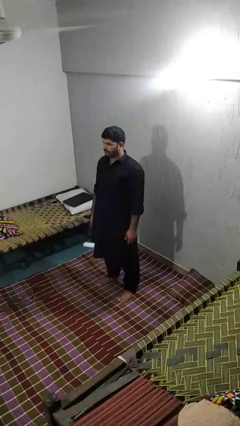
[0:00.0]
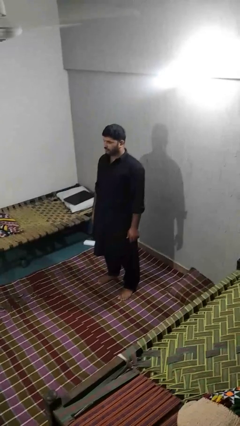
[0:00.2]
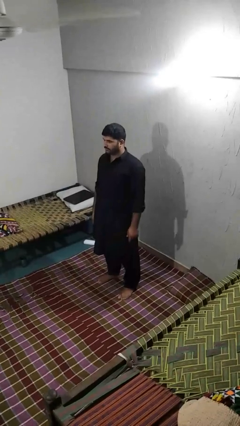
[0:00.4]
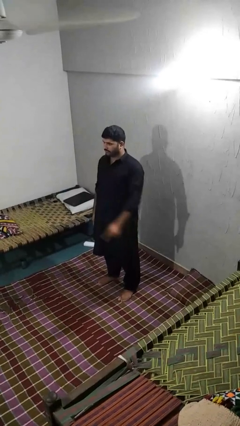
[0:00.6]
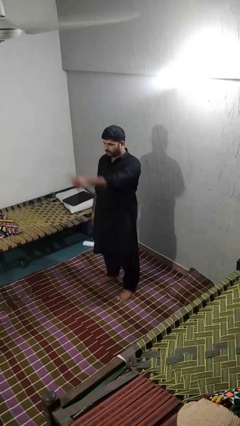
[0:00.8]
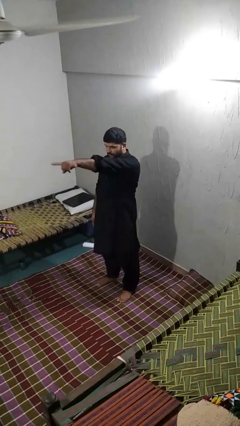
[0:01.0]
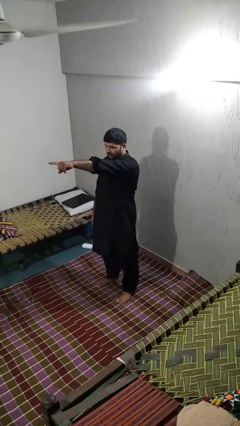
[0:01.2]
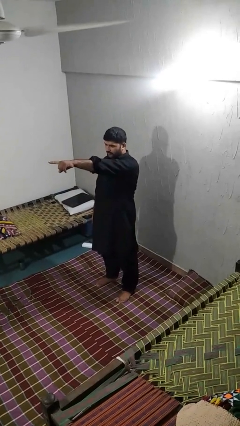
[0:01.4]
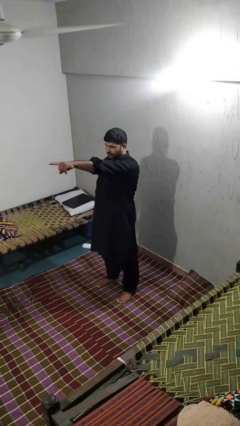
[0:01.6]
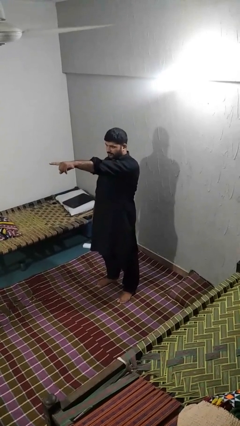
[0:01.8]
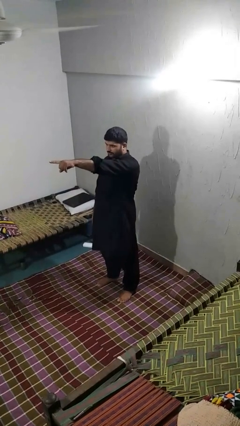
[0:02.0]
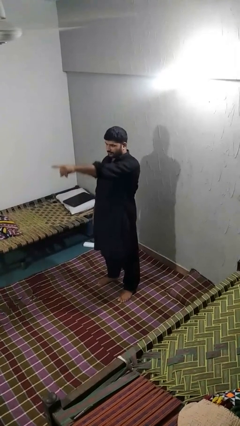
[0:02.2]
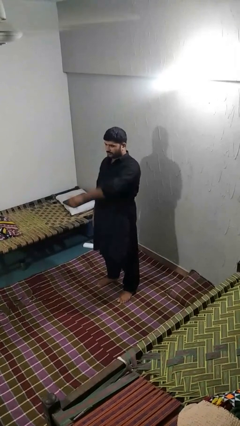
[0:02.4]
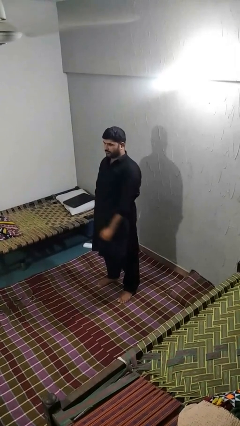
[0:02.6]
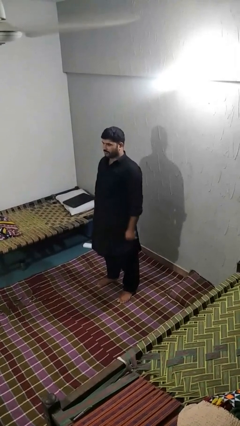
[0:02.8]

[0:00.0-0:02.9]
person points at person

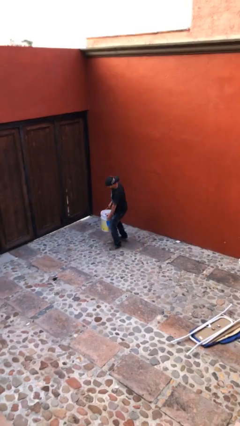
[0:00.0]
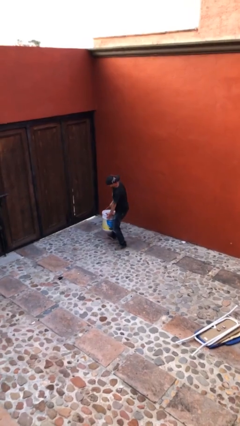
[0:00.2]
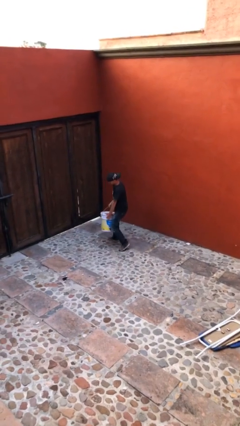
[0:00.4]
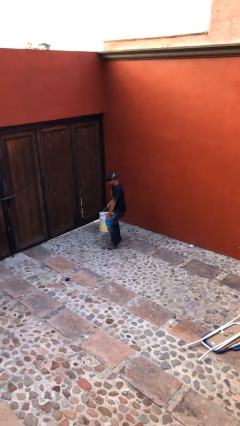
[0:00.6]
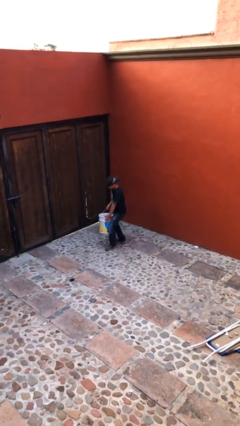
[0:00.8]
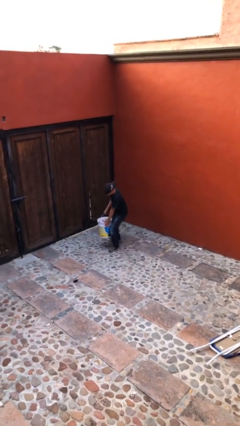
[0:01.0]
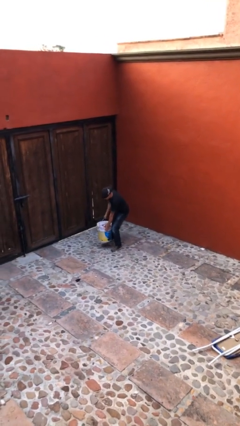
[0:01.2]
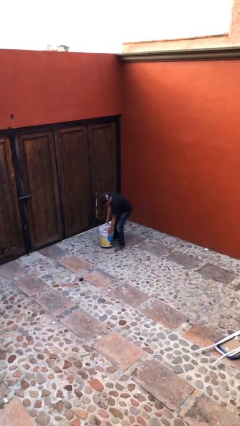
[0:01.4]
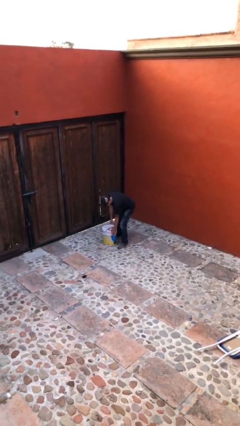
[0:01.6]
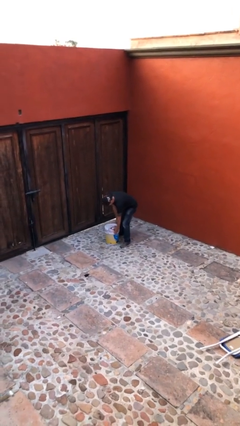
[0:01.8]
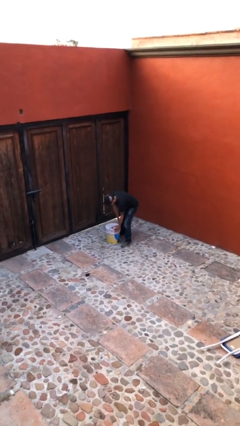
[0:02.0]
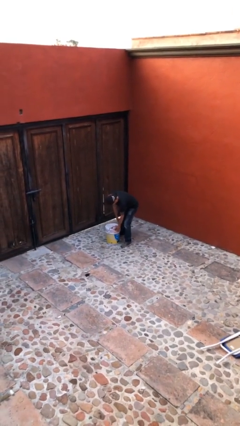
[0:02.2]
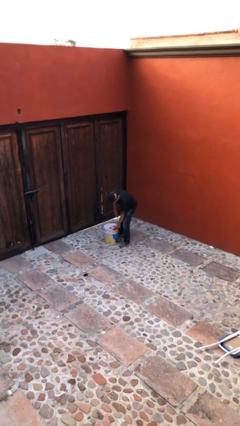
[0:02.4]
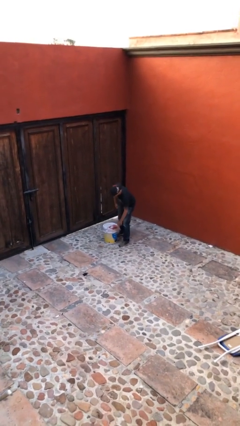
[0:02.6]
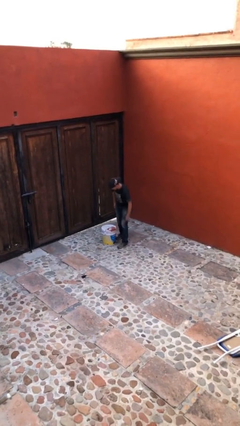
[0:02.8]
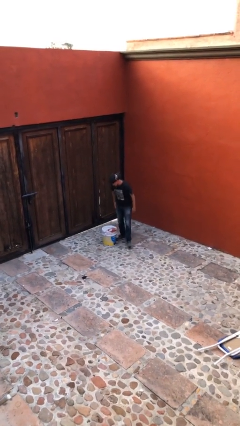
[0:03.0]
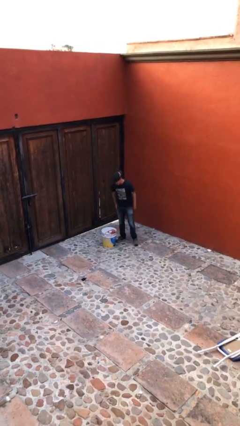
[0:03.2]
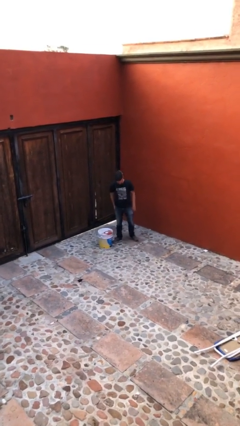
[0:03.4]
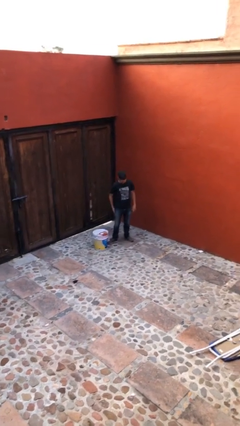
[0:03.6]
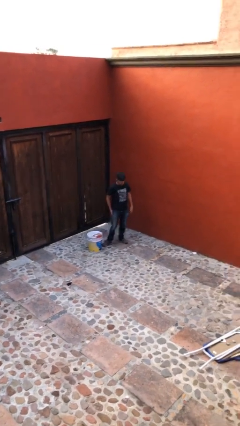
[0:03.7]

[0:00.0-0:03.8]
person puts down object on floor

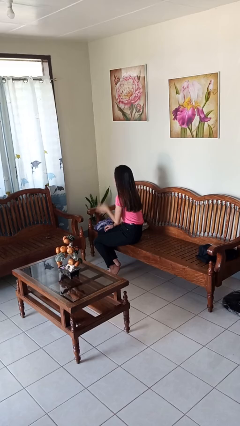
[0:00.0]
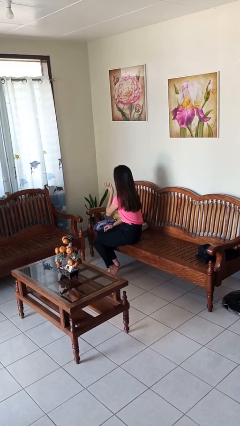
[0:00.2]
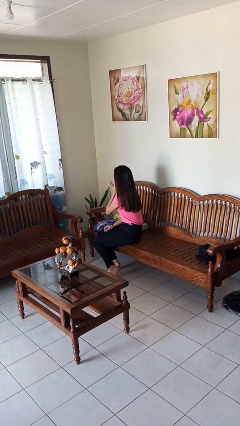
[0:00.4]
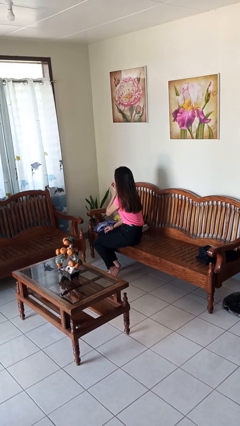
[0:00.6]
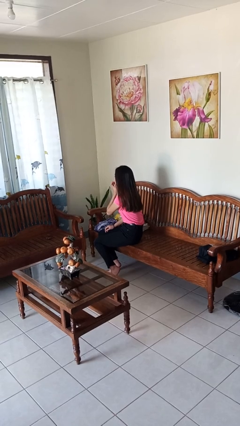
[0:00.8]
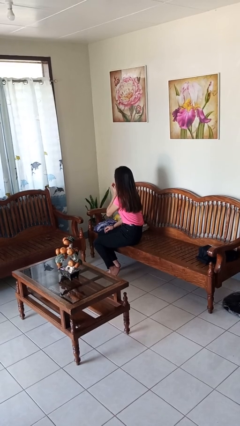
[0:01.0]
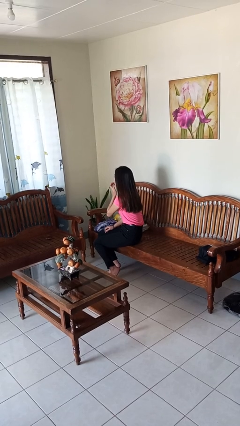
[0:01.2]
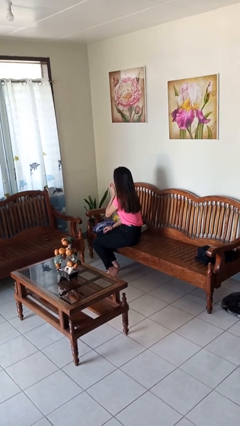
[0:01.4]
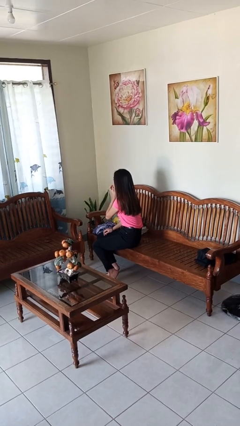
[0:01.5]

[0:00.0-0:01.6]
person licks fingers

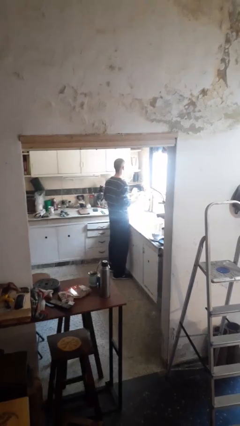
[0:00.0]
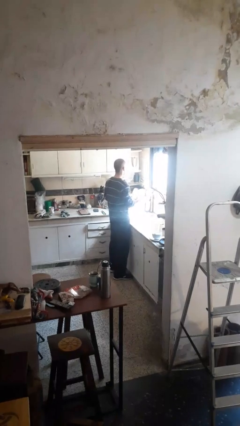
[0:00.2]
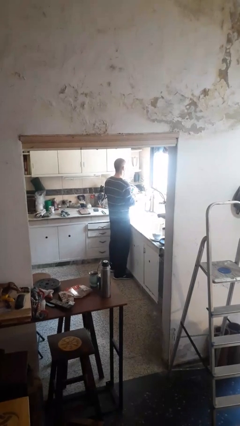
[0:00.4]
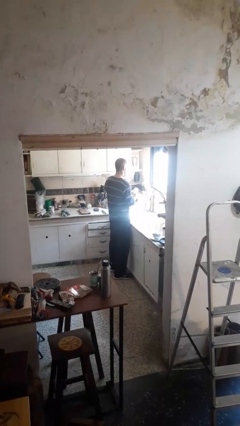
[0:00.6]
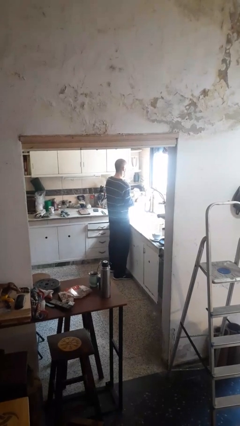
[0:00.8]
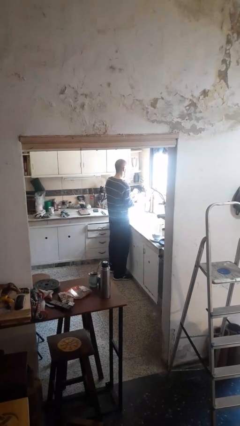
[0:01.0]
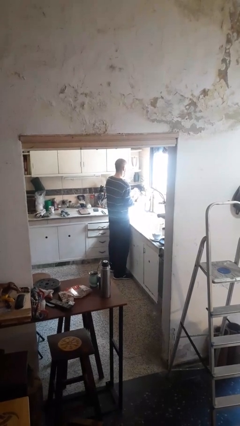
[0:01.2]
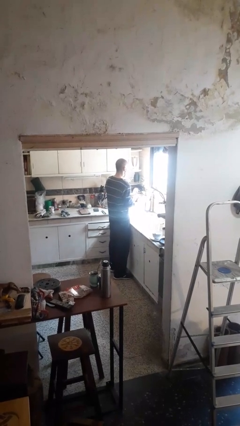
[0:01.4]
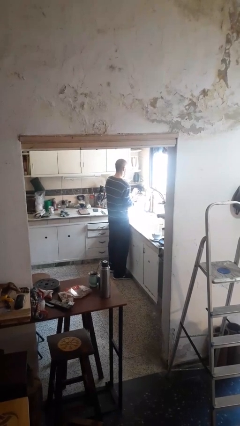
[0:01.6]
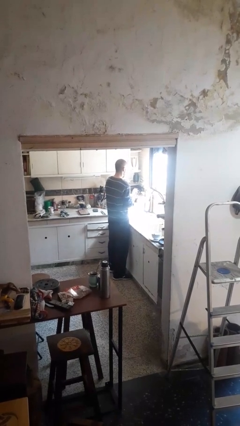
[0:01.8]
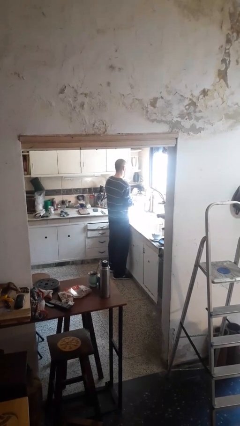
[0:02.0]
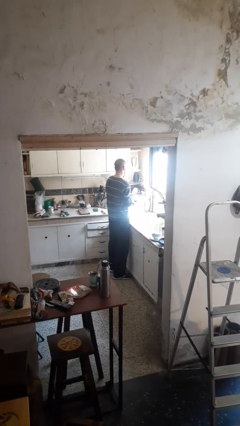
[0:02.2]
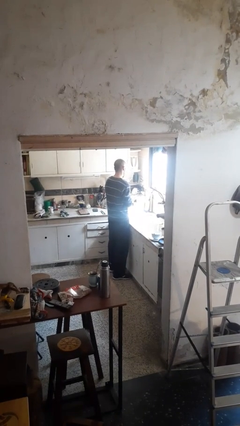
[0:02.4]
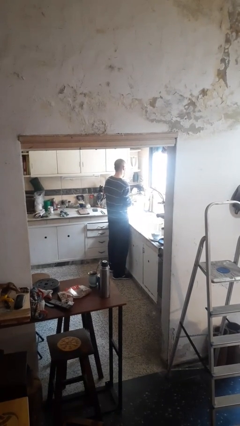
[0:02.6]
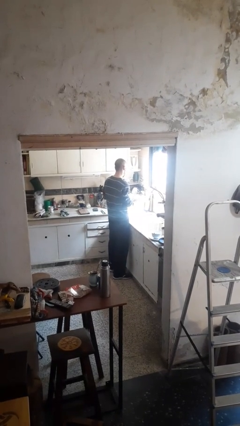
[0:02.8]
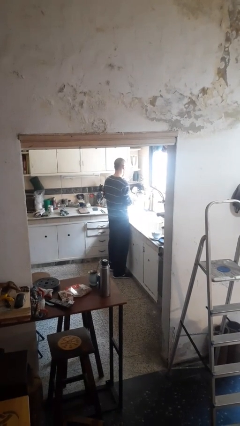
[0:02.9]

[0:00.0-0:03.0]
person washes dish

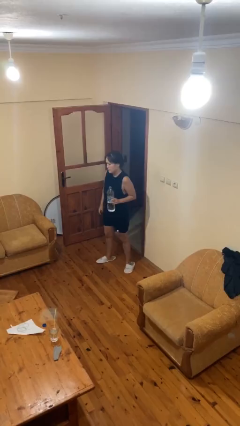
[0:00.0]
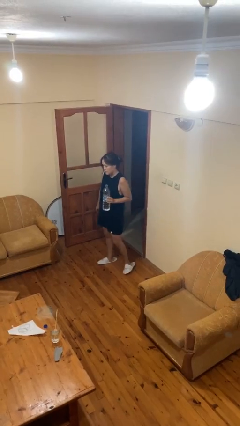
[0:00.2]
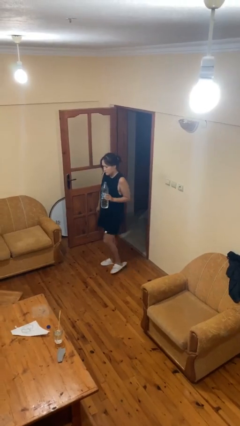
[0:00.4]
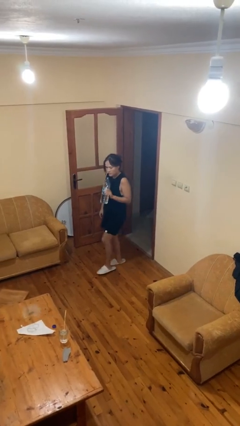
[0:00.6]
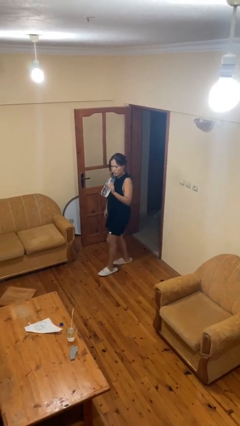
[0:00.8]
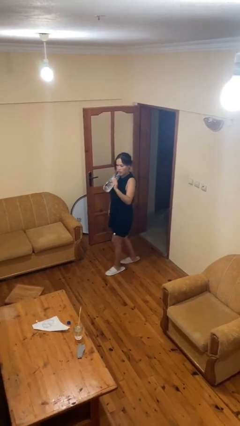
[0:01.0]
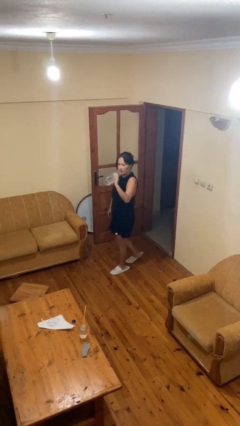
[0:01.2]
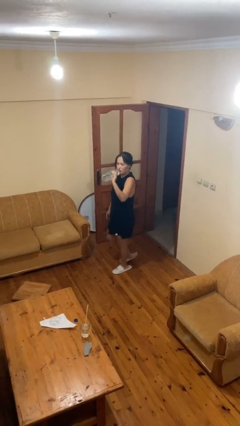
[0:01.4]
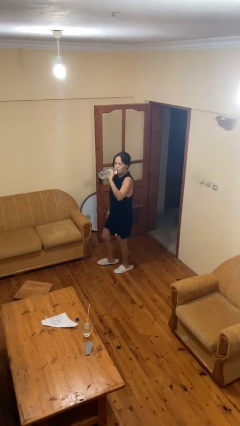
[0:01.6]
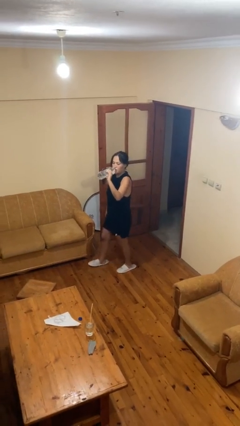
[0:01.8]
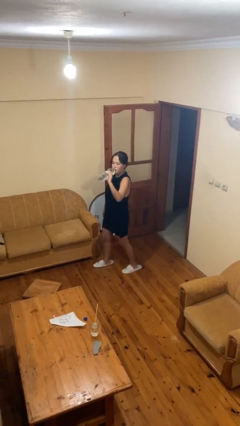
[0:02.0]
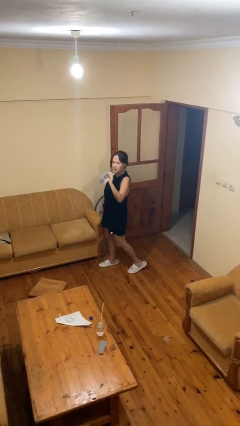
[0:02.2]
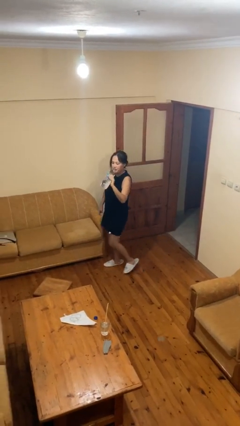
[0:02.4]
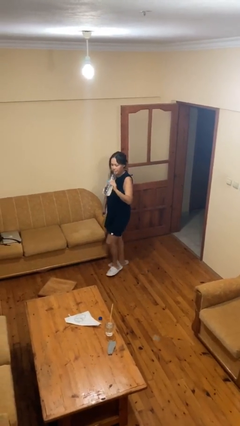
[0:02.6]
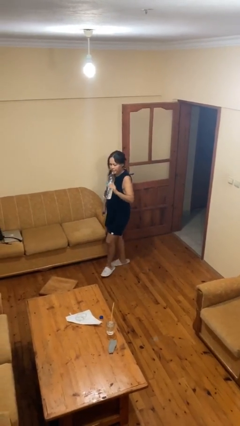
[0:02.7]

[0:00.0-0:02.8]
person drinks from bottle

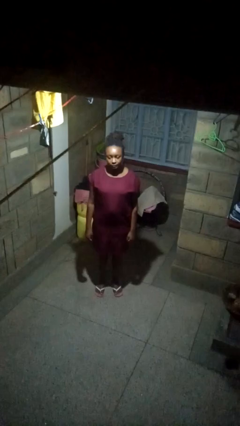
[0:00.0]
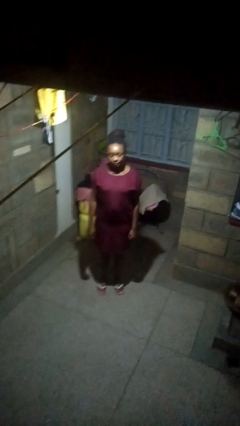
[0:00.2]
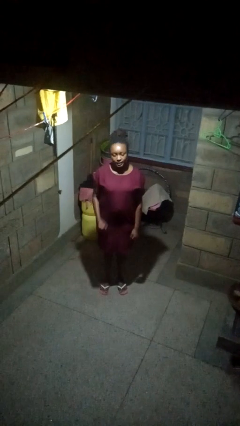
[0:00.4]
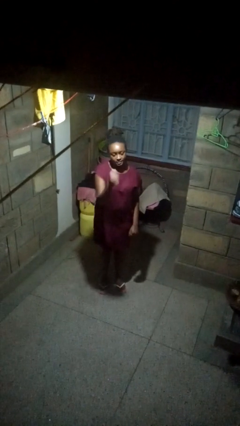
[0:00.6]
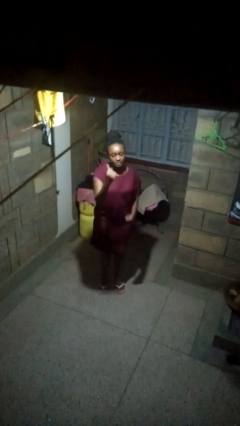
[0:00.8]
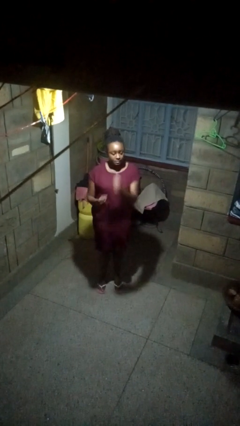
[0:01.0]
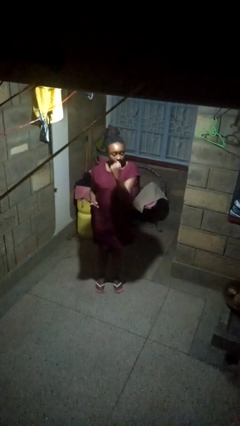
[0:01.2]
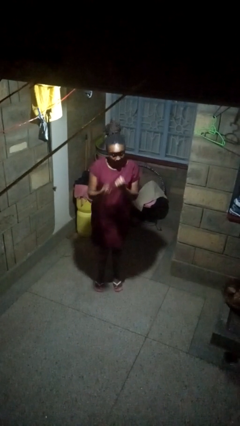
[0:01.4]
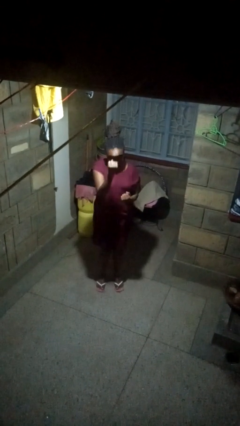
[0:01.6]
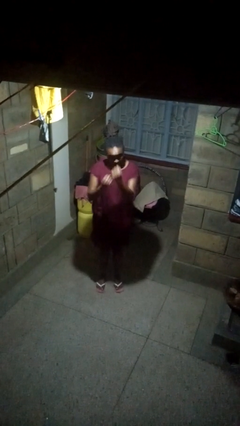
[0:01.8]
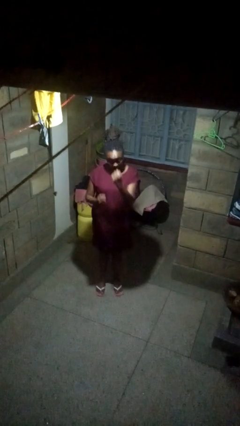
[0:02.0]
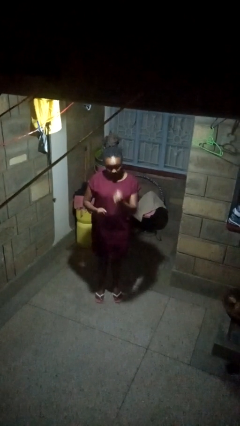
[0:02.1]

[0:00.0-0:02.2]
person punches

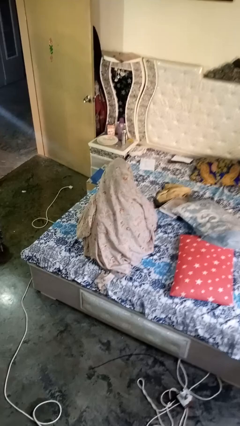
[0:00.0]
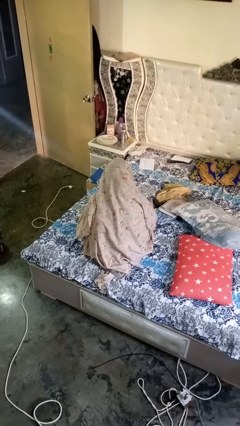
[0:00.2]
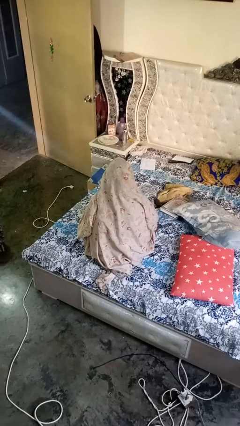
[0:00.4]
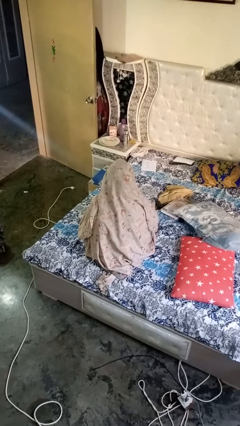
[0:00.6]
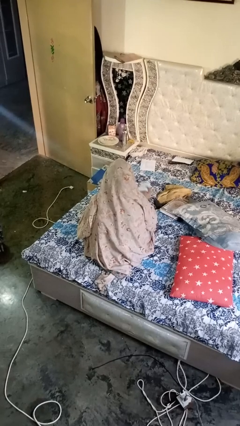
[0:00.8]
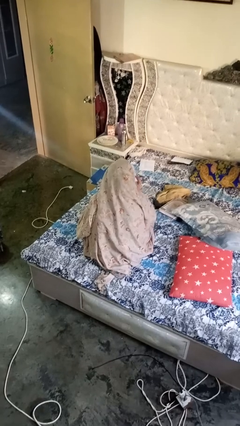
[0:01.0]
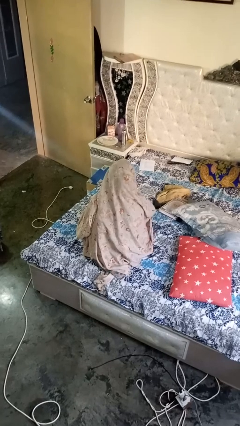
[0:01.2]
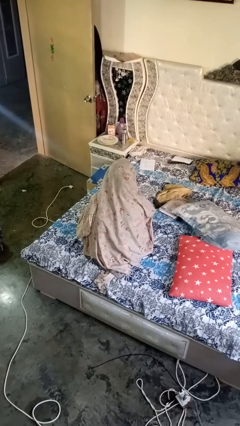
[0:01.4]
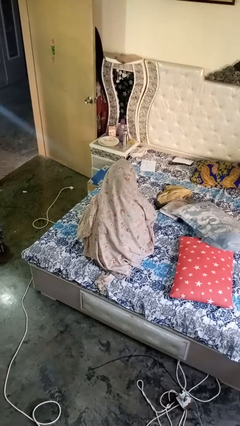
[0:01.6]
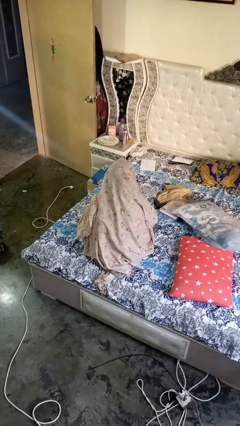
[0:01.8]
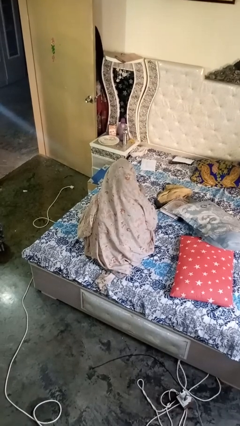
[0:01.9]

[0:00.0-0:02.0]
person wipes mouth with napkin
